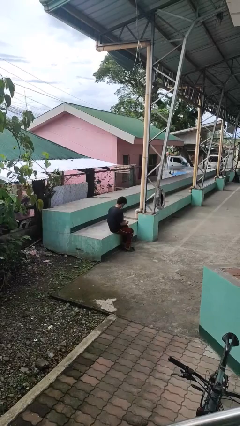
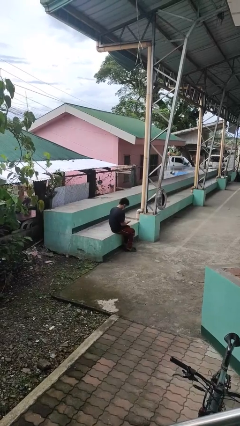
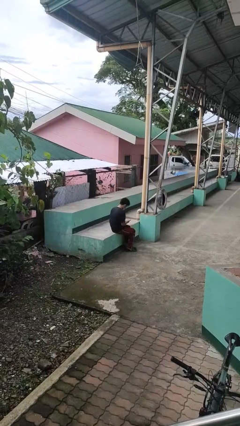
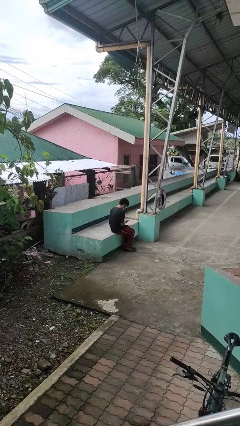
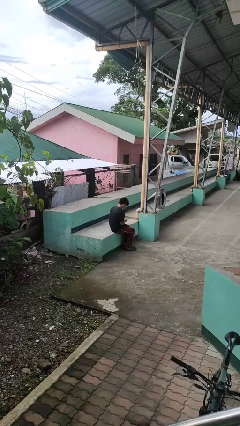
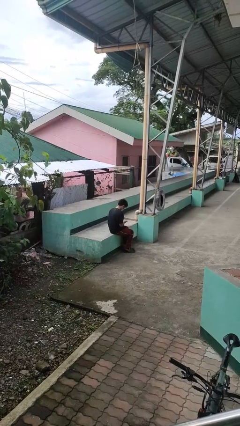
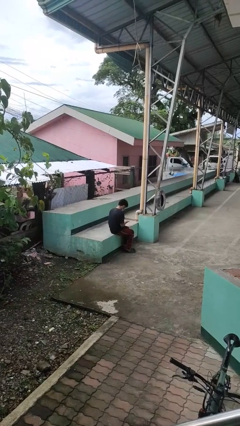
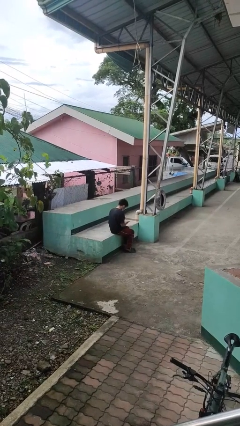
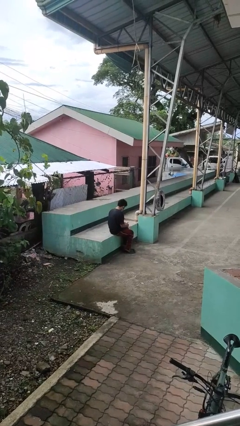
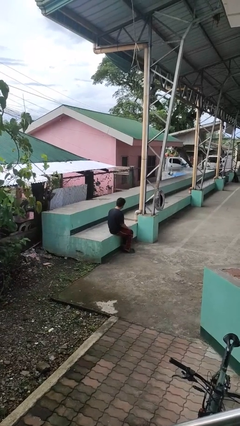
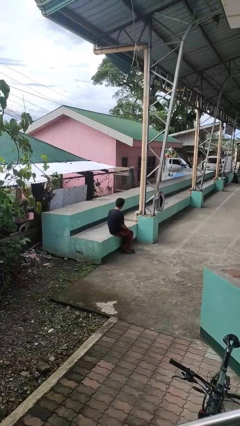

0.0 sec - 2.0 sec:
person looks at hands in lap

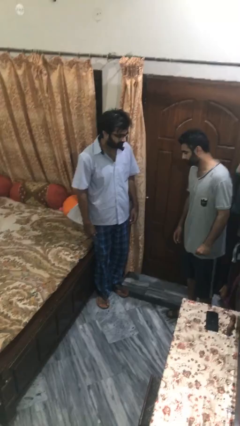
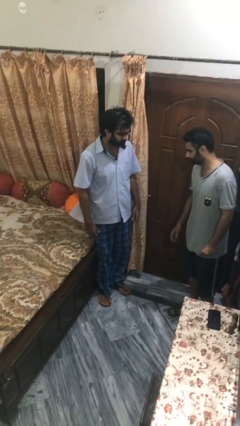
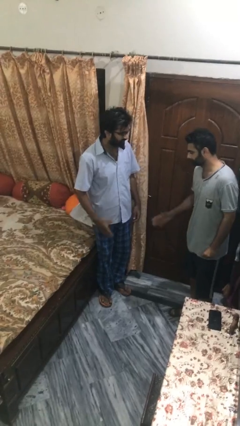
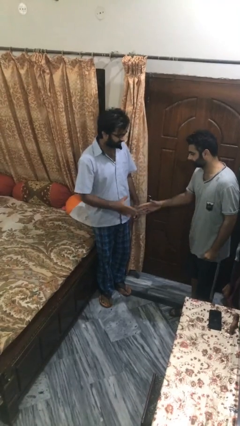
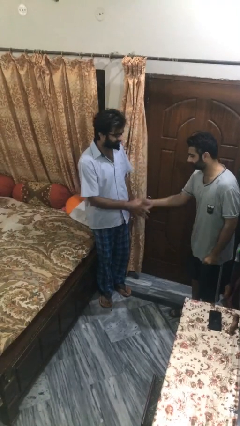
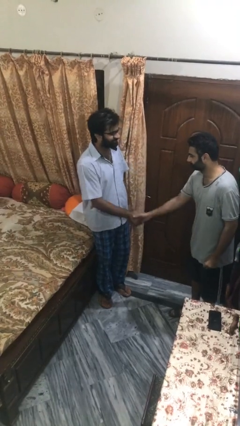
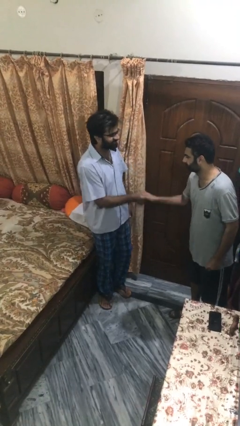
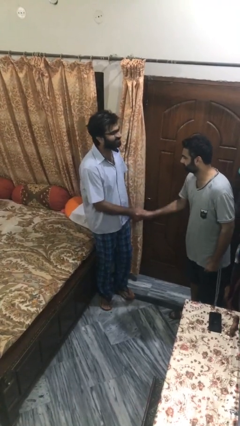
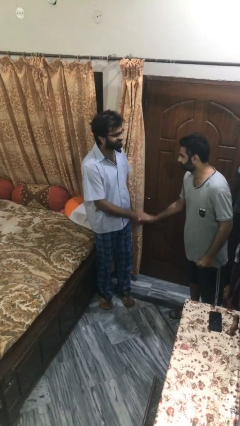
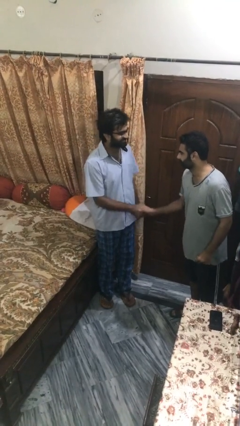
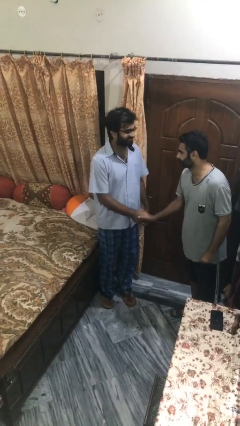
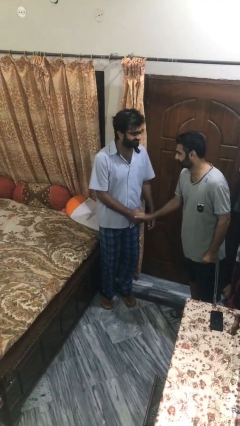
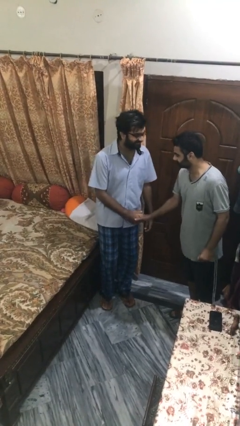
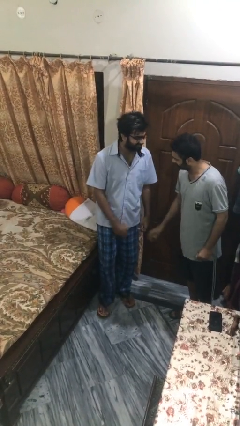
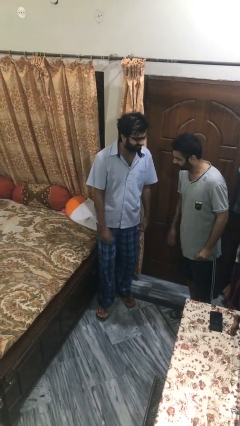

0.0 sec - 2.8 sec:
person shakes hand

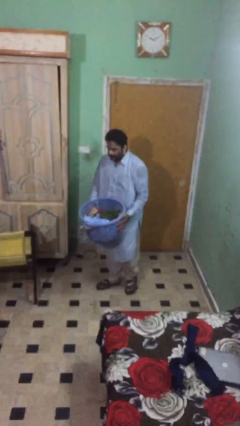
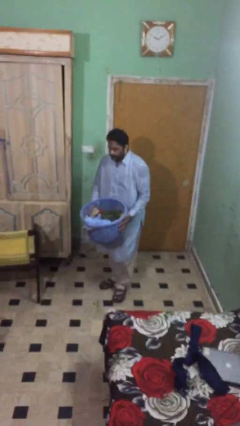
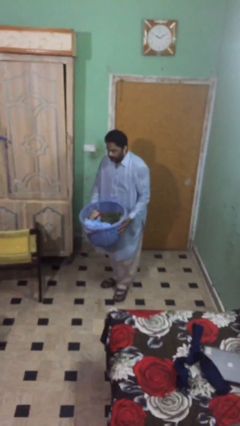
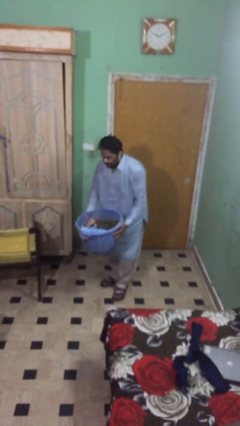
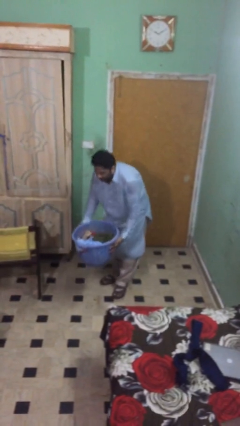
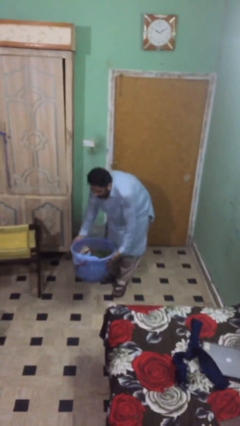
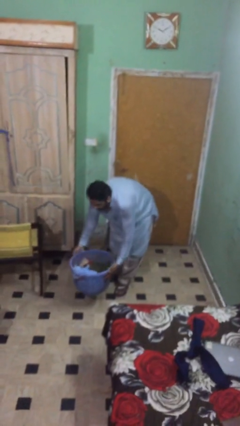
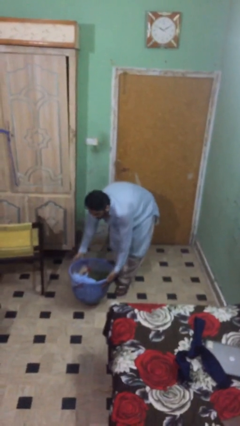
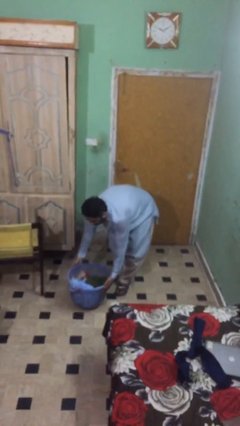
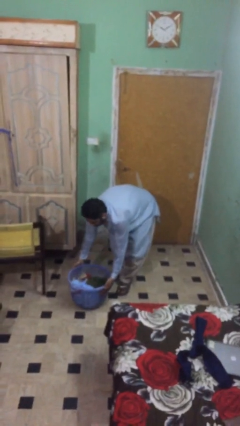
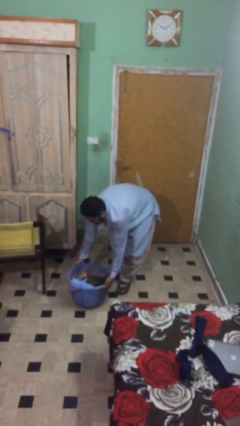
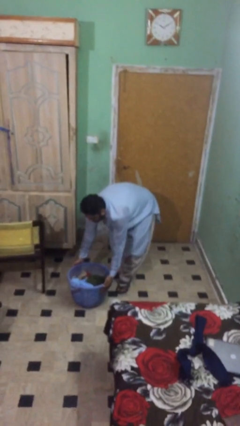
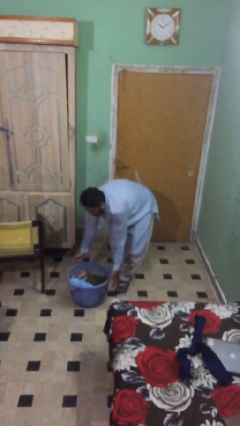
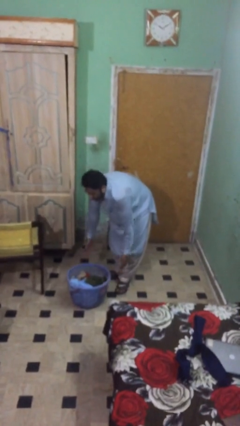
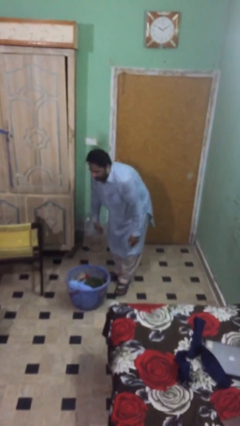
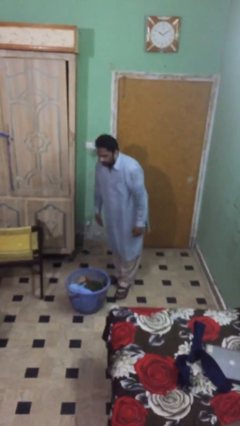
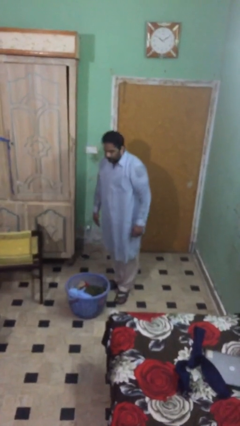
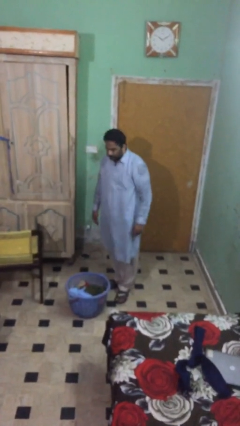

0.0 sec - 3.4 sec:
person puts down object on floor

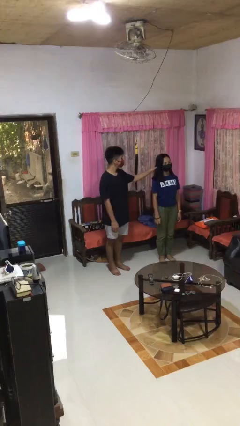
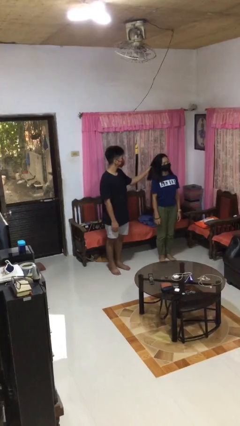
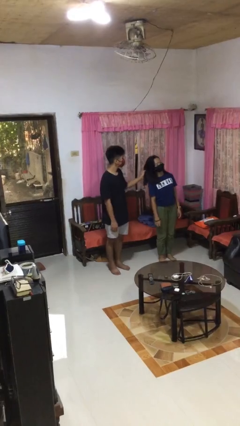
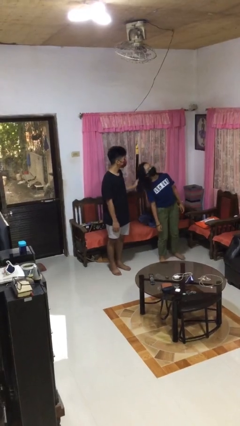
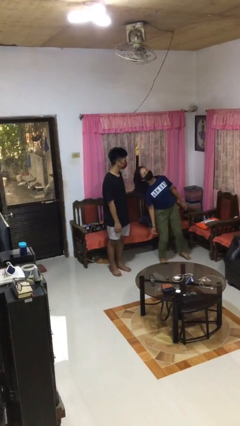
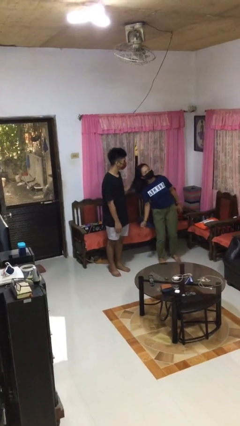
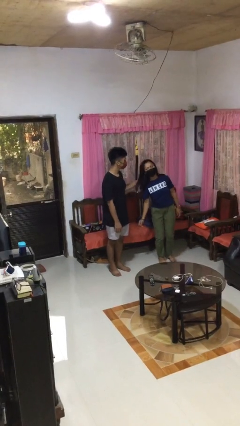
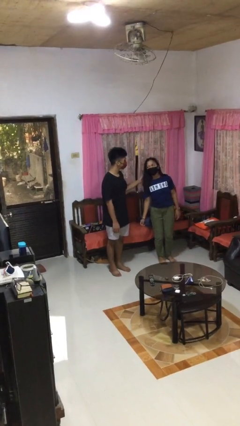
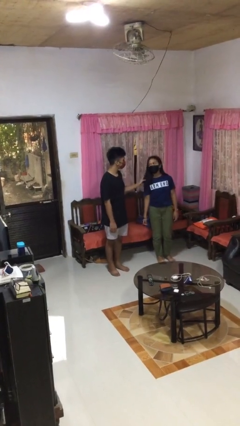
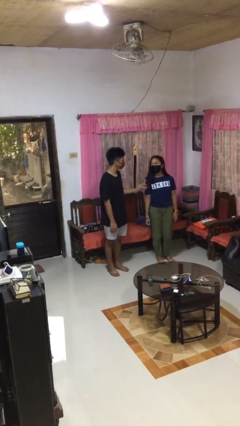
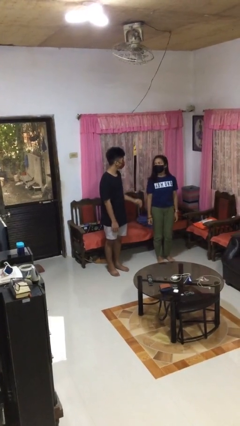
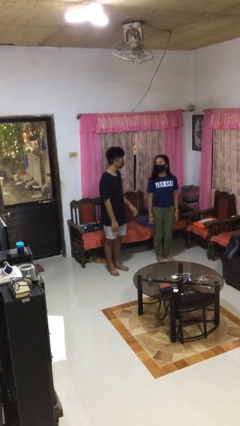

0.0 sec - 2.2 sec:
person grabs person by hair

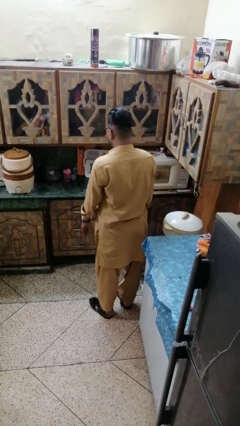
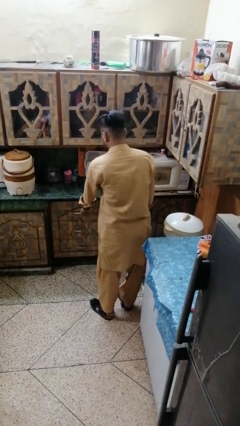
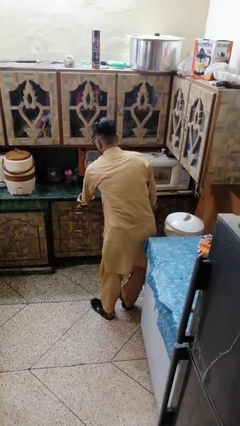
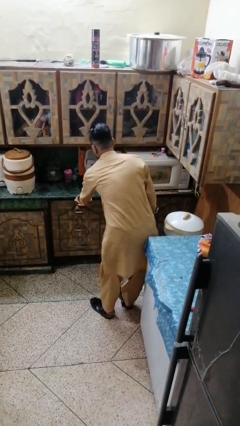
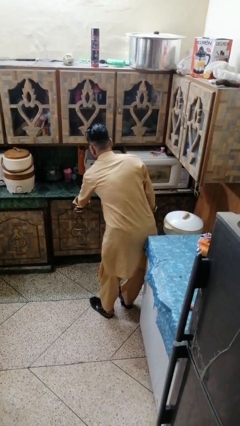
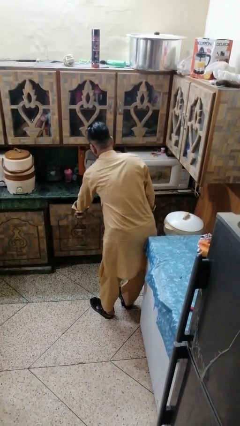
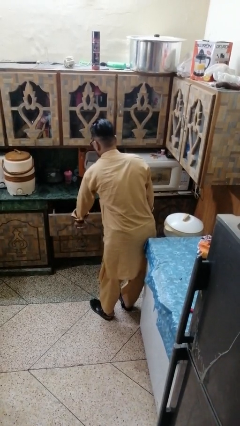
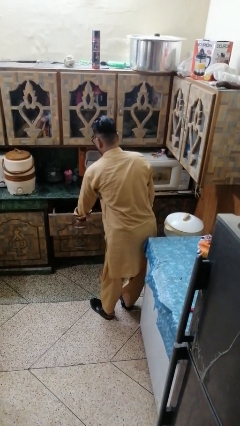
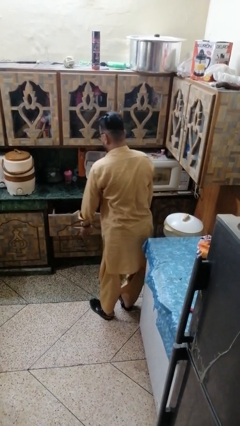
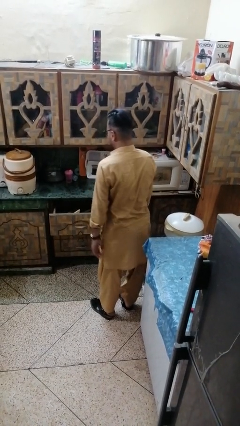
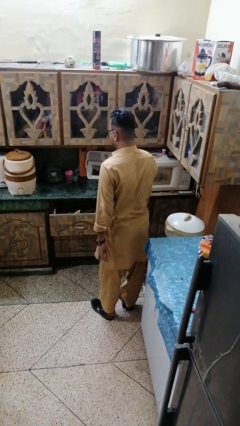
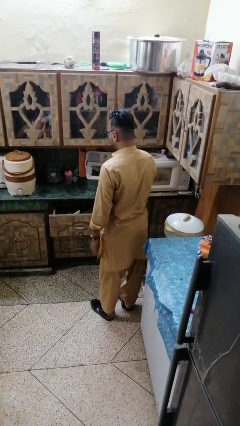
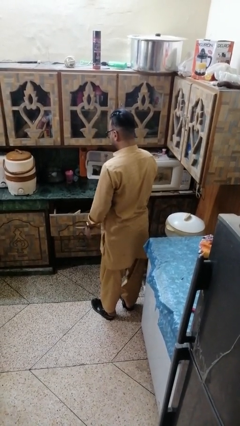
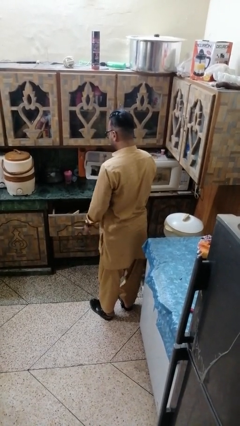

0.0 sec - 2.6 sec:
person opens kitchen drawer

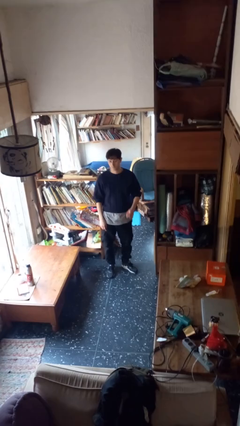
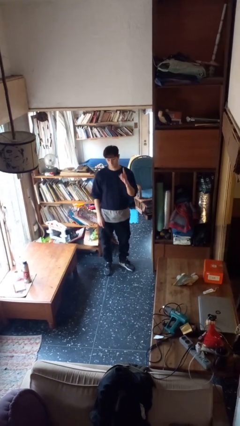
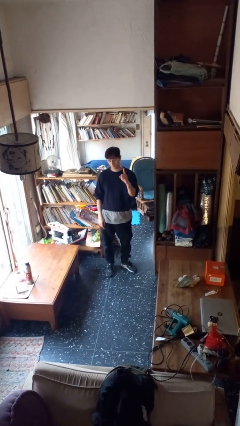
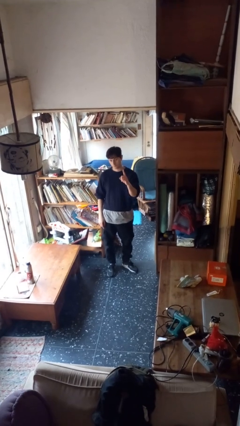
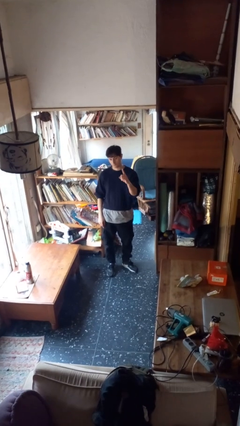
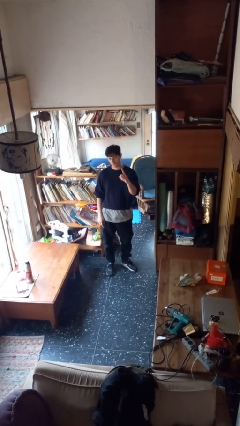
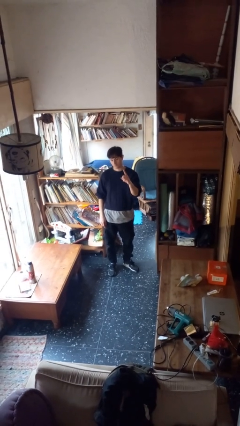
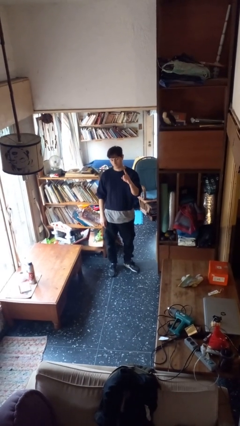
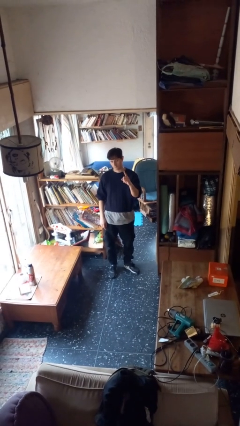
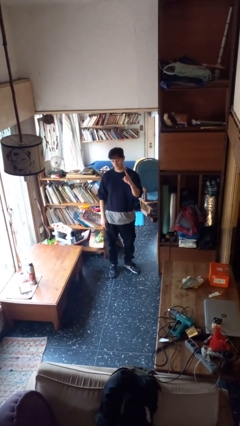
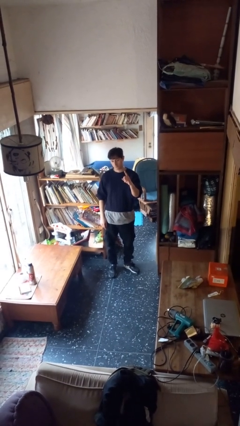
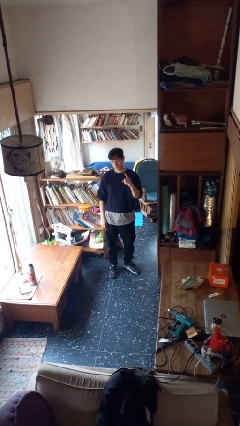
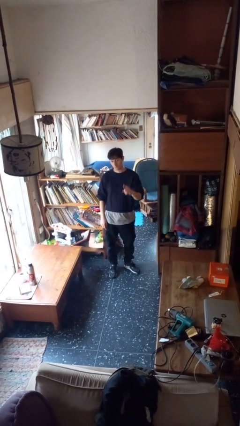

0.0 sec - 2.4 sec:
person gestures number one

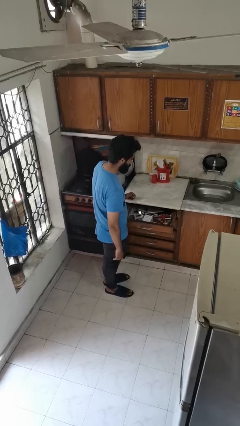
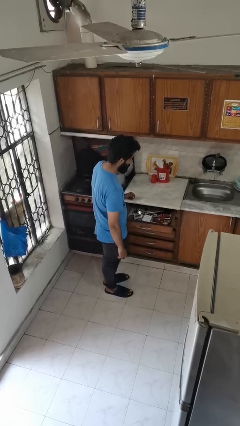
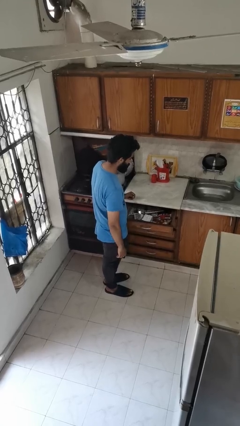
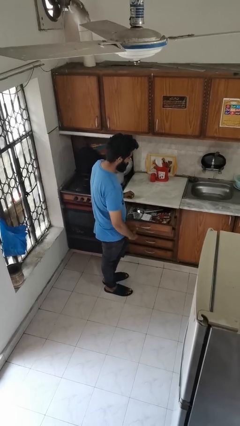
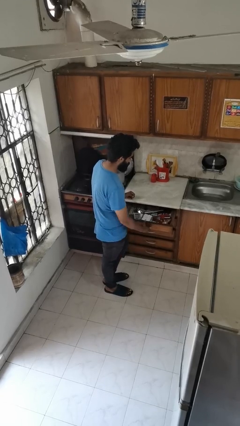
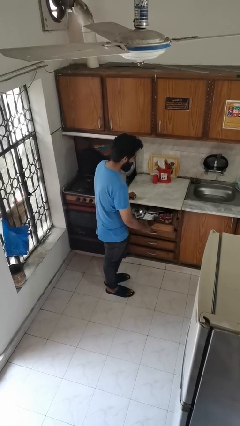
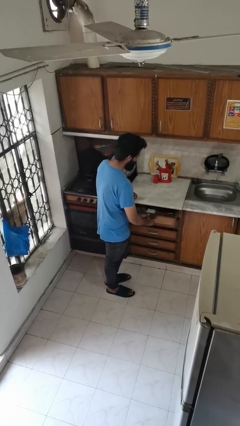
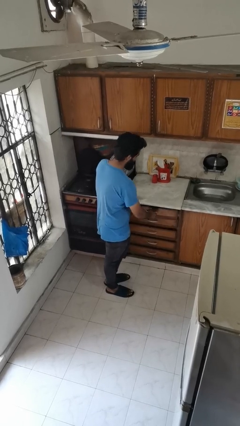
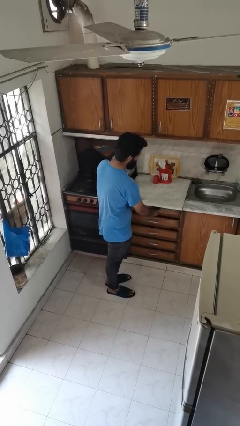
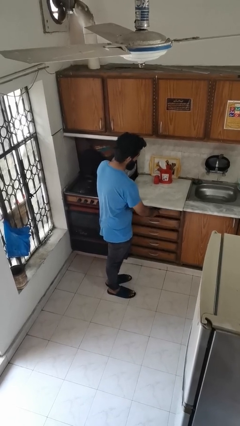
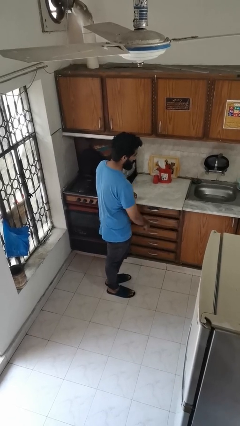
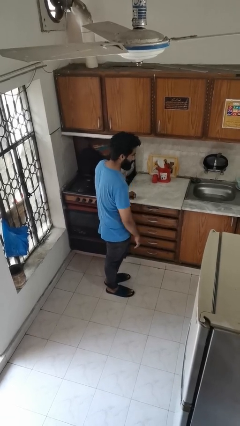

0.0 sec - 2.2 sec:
person closes kitchen drawer
